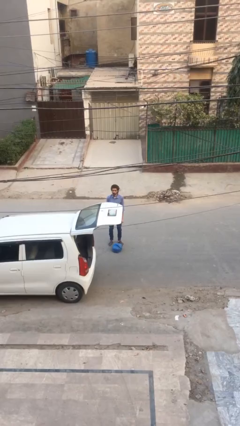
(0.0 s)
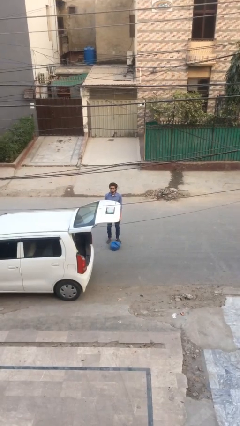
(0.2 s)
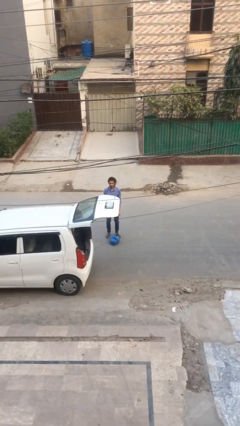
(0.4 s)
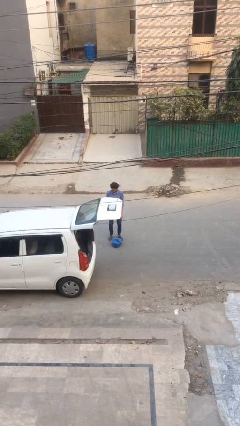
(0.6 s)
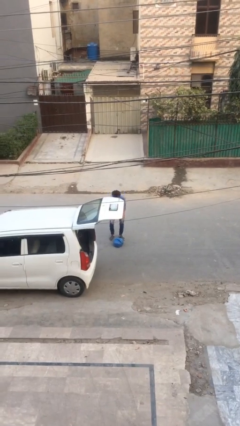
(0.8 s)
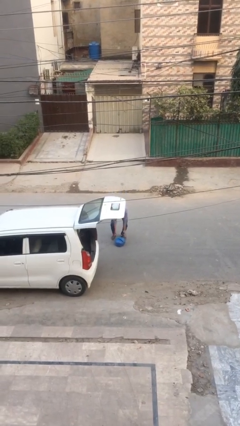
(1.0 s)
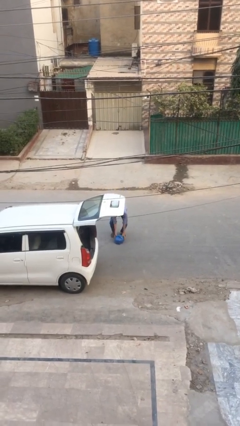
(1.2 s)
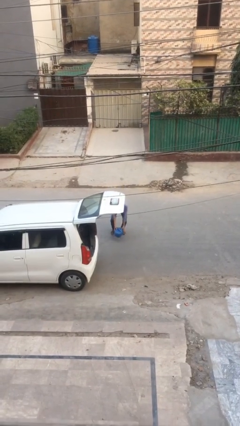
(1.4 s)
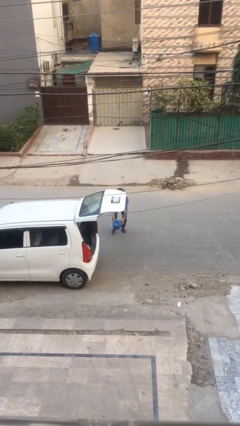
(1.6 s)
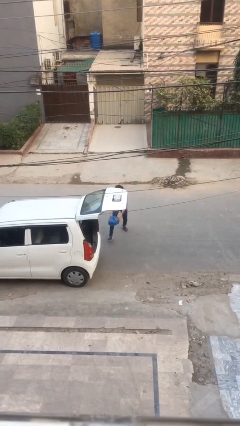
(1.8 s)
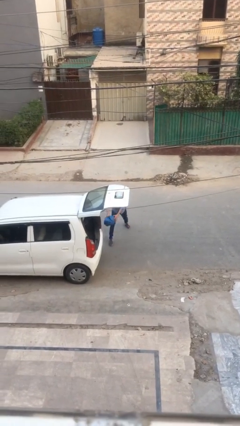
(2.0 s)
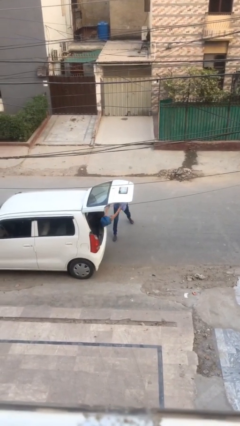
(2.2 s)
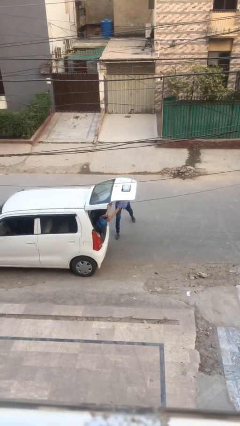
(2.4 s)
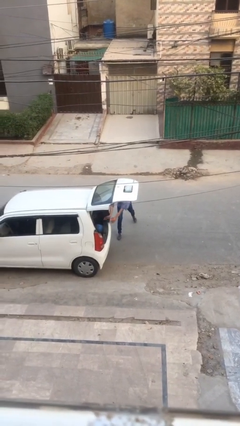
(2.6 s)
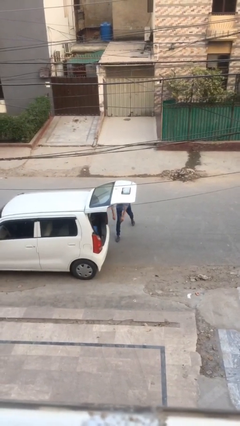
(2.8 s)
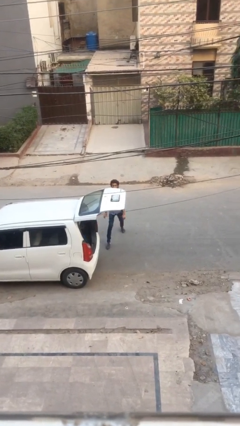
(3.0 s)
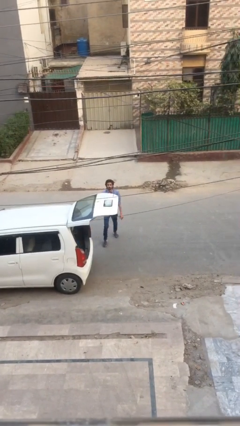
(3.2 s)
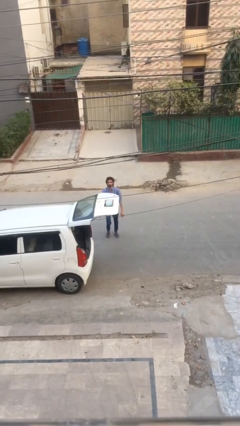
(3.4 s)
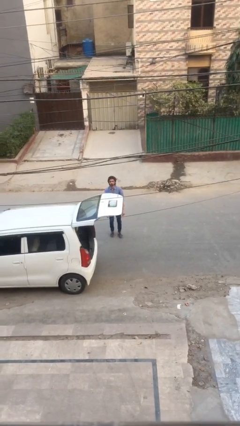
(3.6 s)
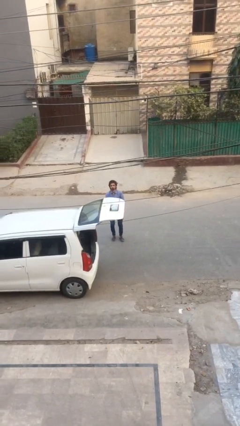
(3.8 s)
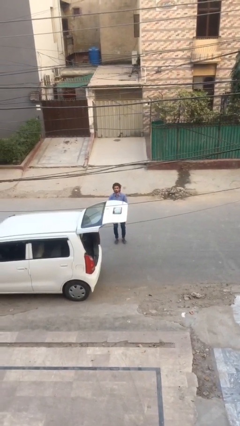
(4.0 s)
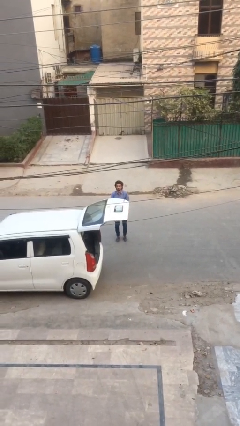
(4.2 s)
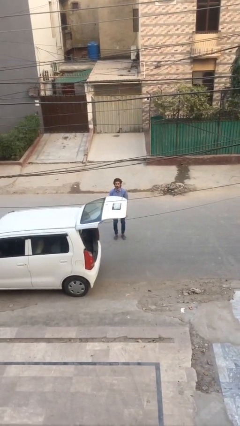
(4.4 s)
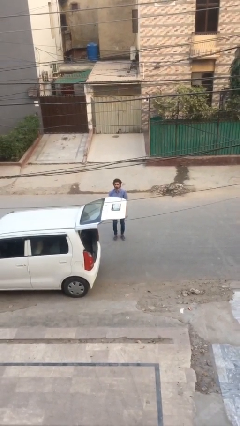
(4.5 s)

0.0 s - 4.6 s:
person loads car

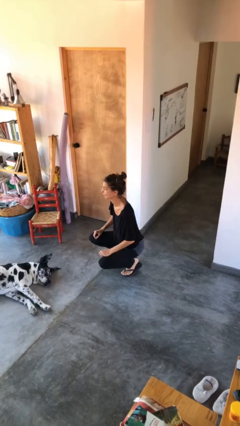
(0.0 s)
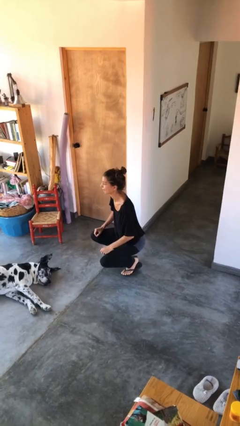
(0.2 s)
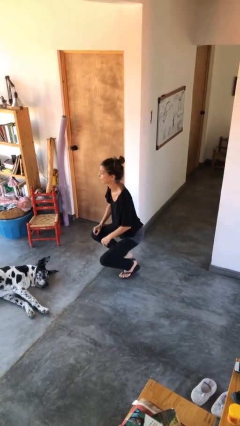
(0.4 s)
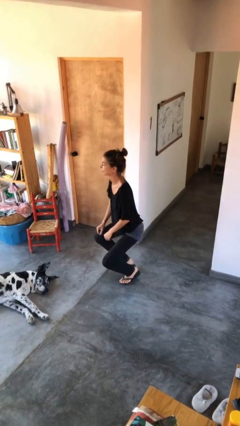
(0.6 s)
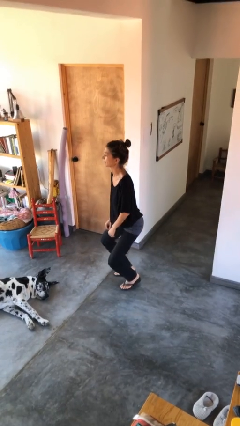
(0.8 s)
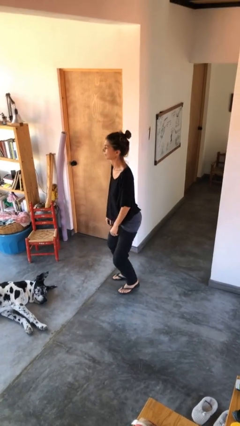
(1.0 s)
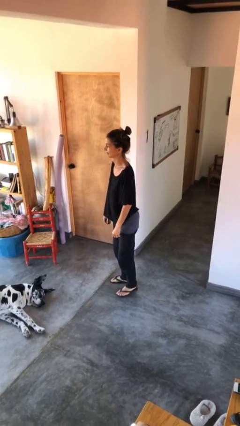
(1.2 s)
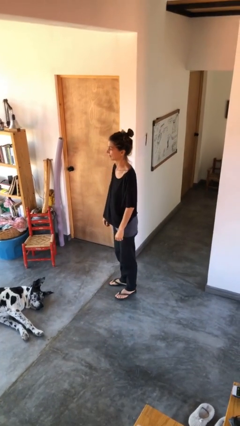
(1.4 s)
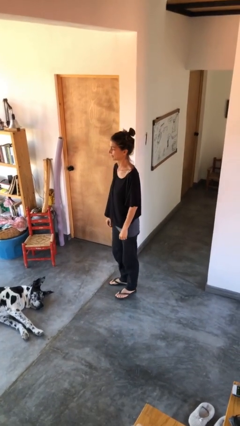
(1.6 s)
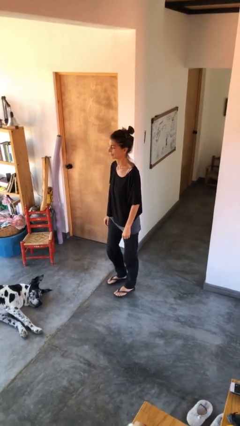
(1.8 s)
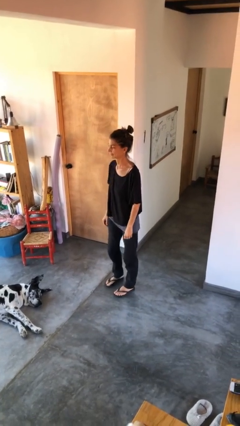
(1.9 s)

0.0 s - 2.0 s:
person stands up

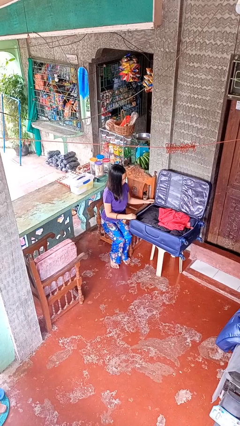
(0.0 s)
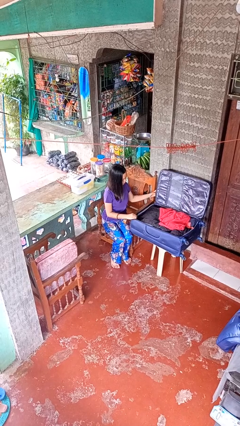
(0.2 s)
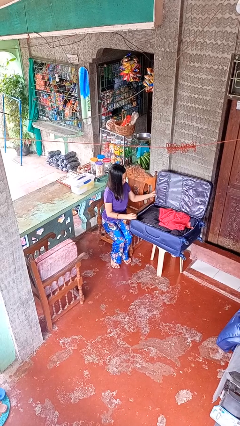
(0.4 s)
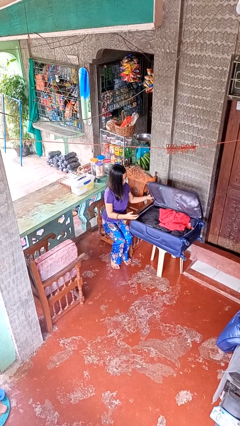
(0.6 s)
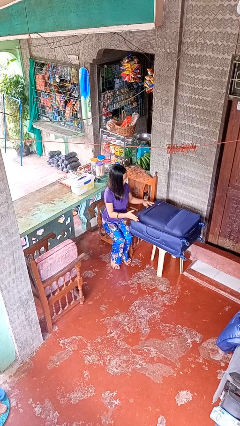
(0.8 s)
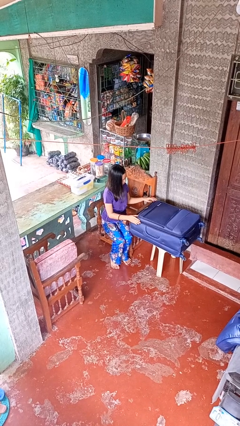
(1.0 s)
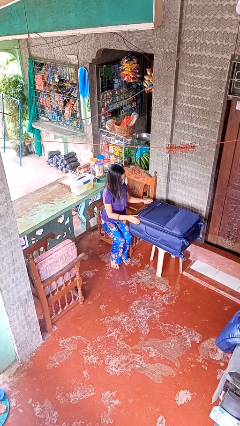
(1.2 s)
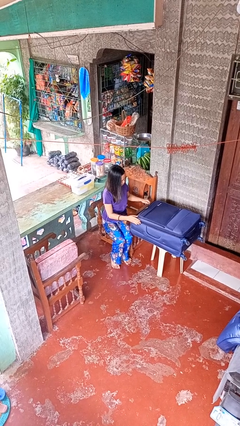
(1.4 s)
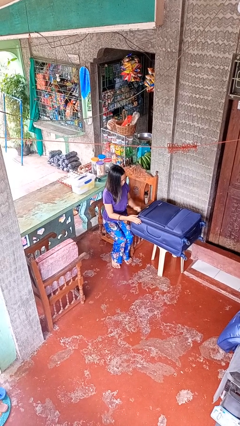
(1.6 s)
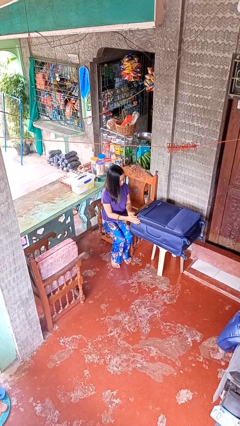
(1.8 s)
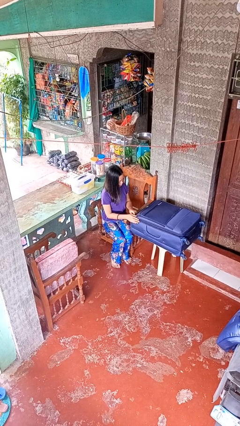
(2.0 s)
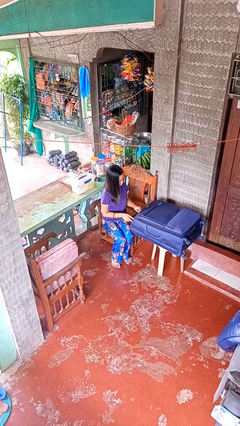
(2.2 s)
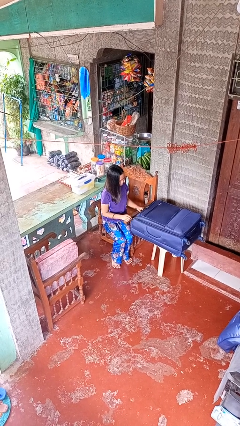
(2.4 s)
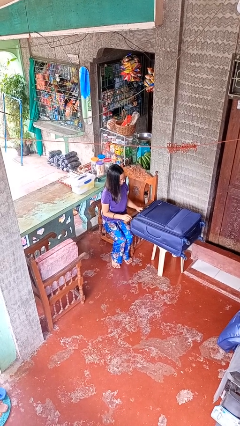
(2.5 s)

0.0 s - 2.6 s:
person closes suitcase

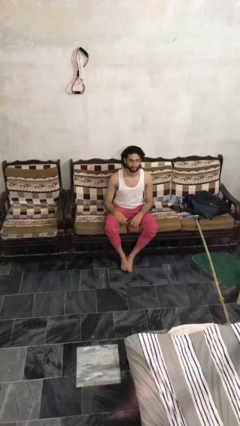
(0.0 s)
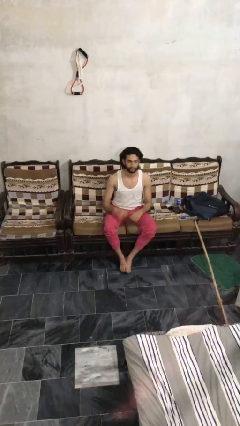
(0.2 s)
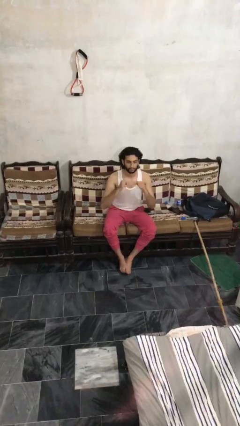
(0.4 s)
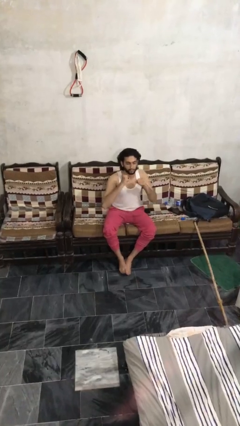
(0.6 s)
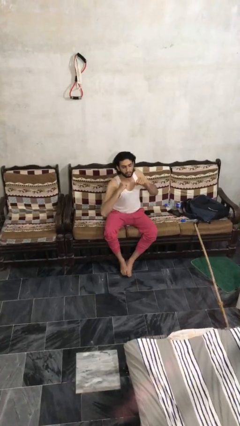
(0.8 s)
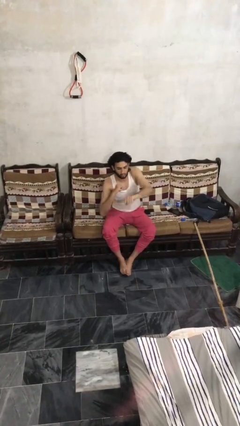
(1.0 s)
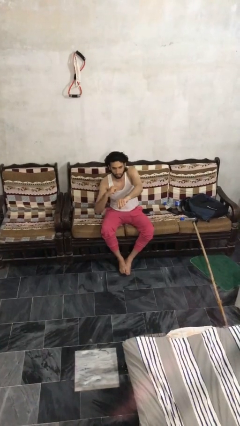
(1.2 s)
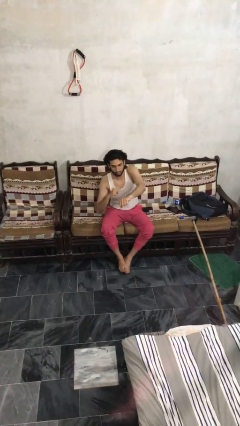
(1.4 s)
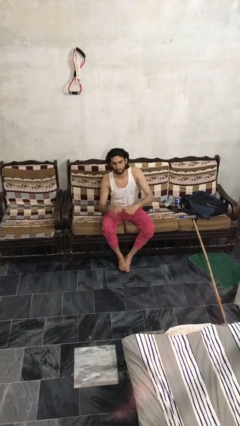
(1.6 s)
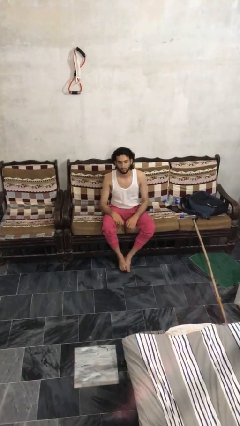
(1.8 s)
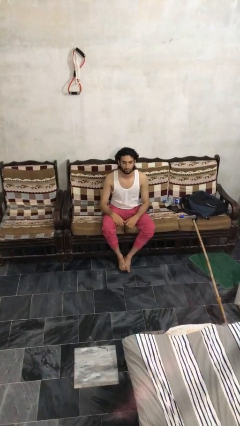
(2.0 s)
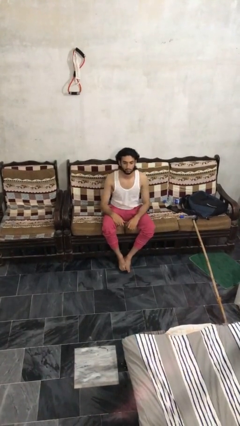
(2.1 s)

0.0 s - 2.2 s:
person punches

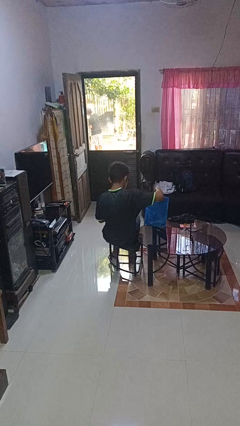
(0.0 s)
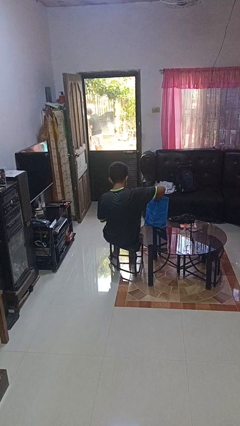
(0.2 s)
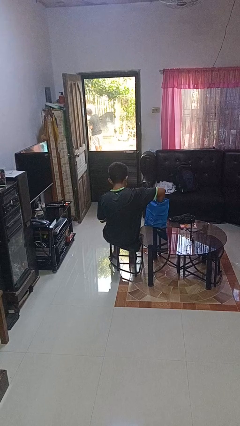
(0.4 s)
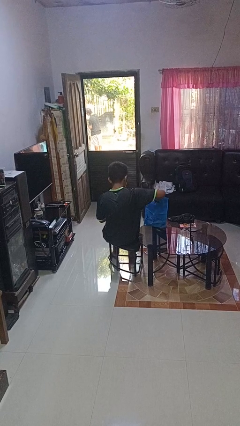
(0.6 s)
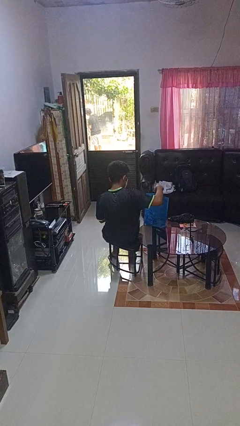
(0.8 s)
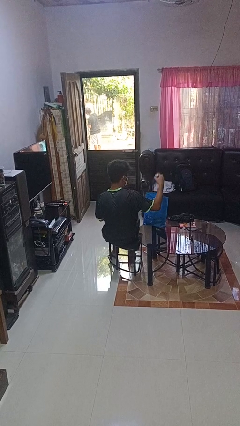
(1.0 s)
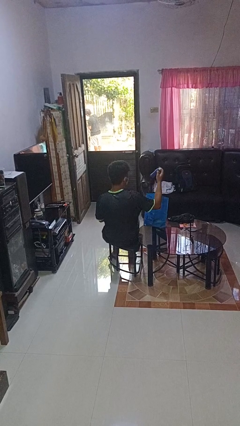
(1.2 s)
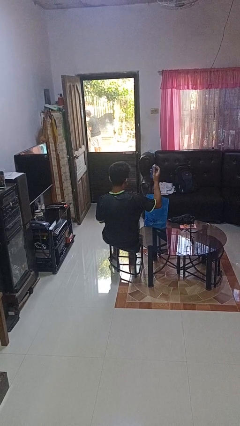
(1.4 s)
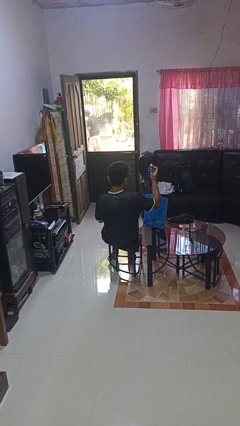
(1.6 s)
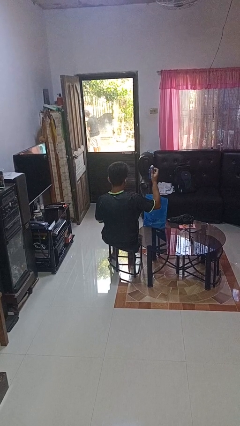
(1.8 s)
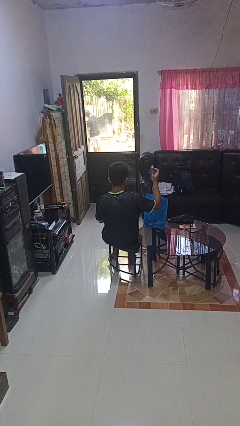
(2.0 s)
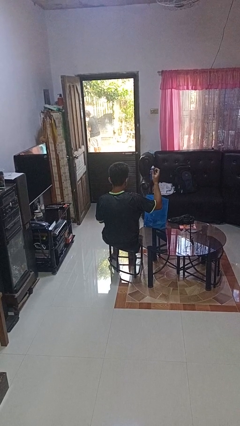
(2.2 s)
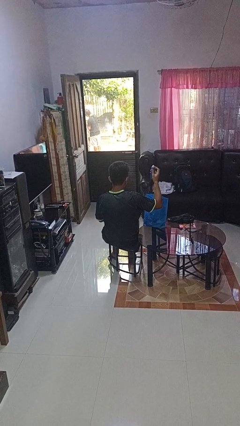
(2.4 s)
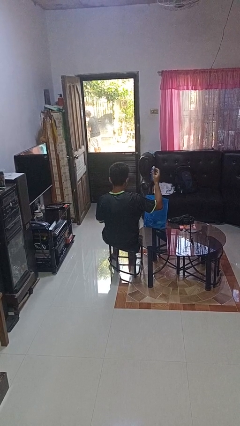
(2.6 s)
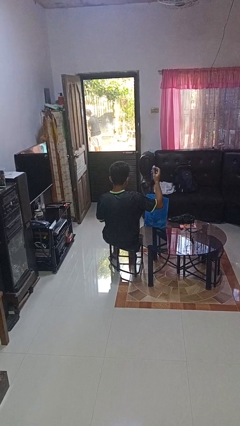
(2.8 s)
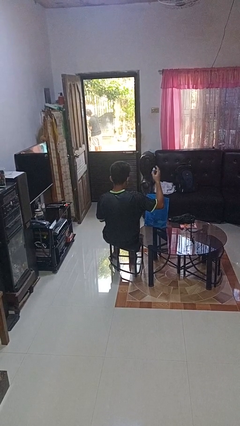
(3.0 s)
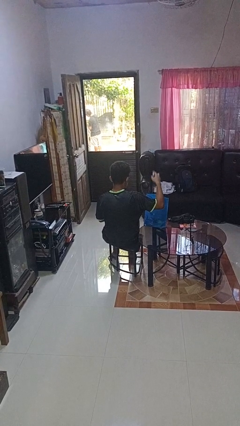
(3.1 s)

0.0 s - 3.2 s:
person takes object from bag

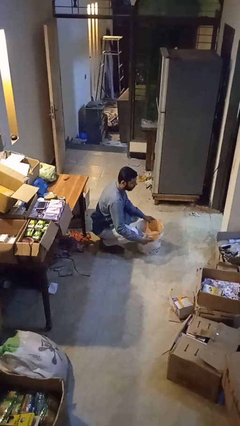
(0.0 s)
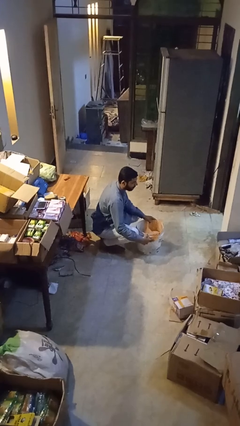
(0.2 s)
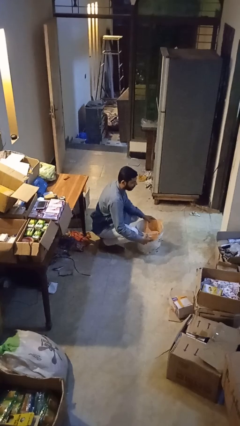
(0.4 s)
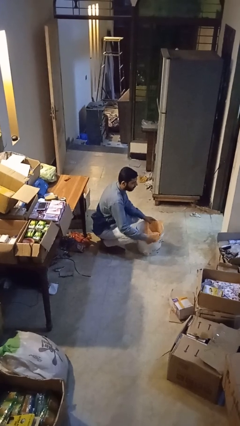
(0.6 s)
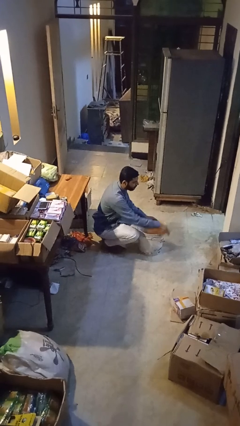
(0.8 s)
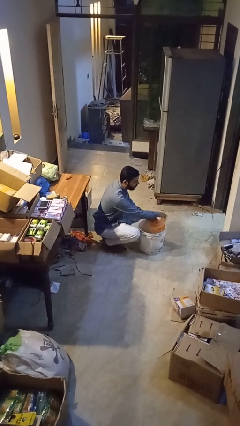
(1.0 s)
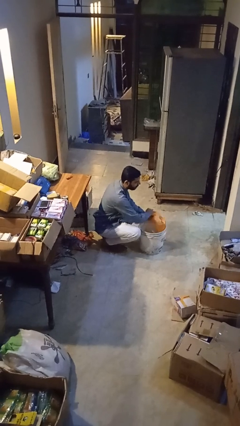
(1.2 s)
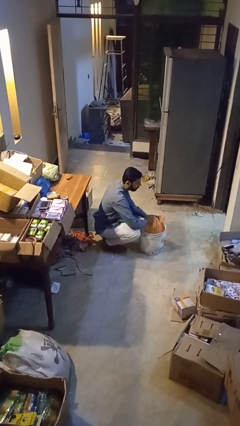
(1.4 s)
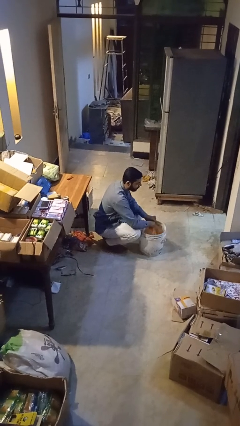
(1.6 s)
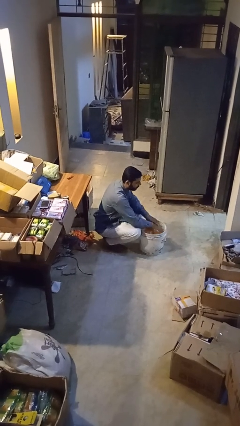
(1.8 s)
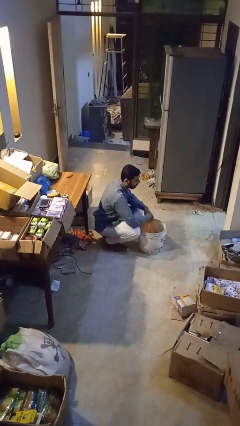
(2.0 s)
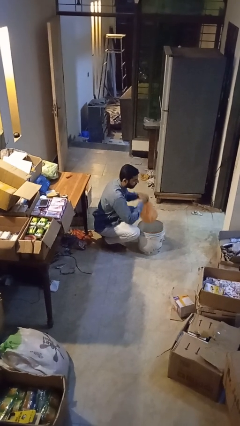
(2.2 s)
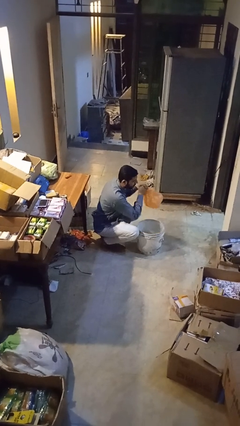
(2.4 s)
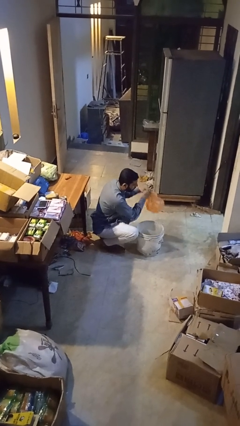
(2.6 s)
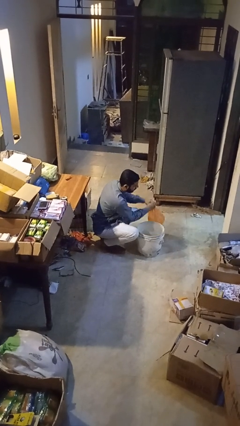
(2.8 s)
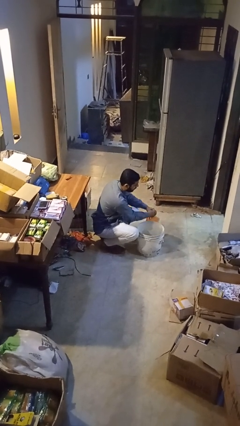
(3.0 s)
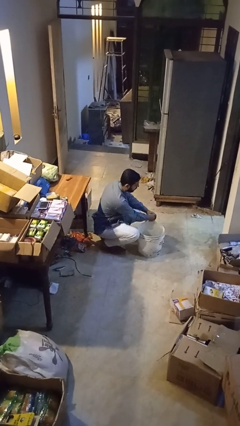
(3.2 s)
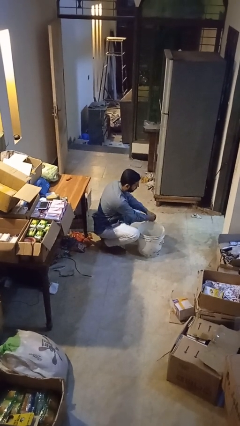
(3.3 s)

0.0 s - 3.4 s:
person removes trashbag from trashcan
